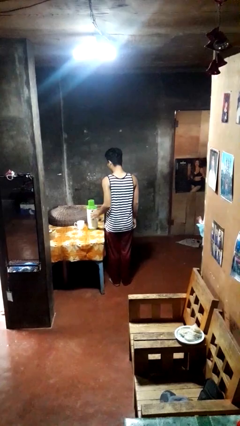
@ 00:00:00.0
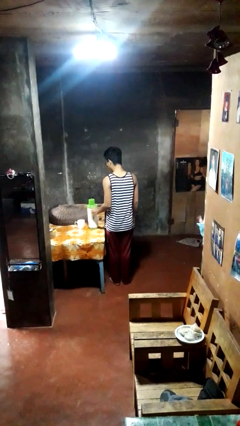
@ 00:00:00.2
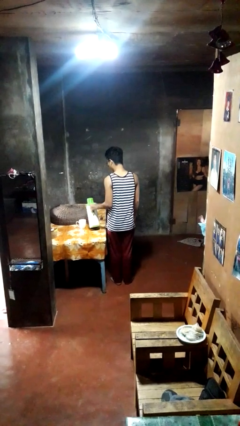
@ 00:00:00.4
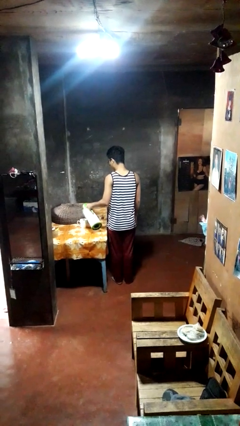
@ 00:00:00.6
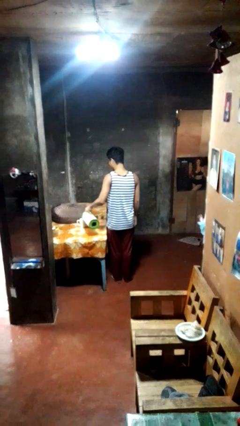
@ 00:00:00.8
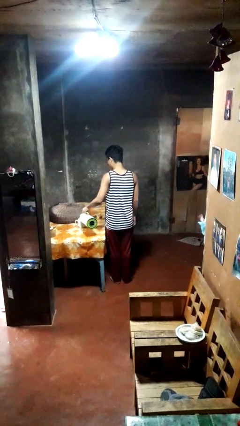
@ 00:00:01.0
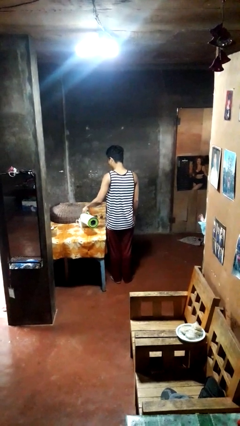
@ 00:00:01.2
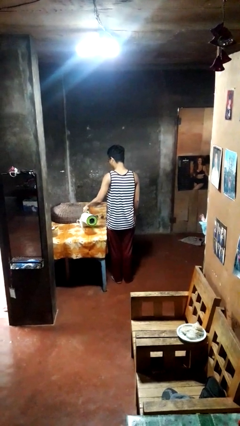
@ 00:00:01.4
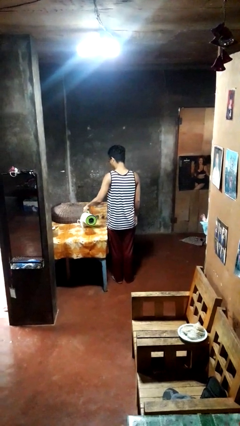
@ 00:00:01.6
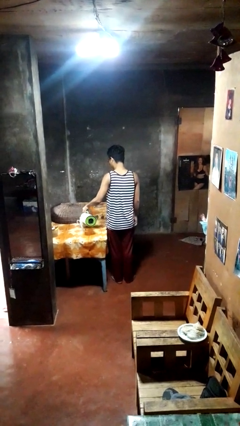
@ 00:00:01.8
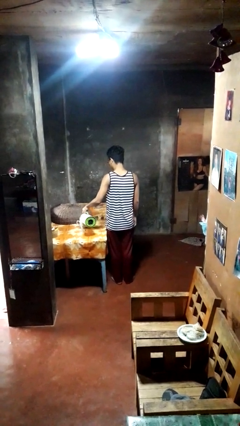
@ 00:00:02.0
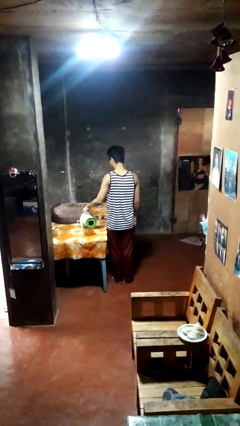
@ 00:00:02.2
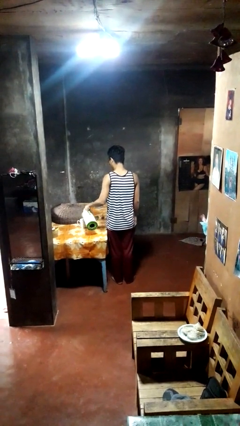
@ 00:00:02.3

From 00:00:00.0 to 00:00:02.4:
person pours coffee into mug

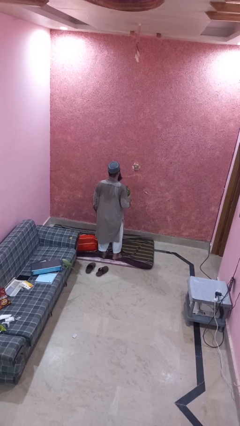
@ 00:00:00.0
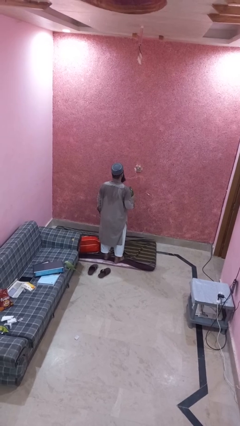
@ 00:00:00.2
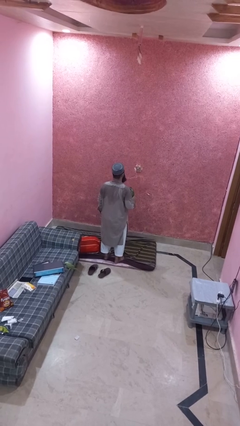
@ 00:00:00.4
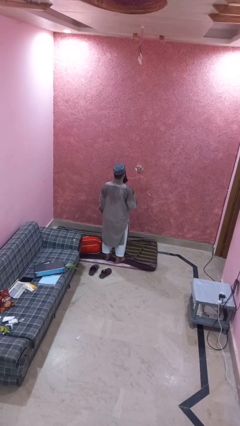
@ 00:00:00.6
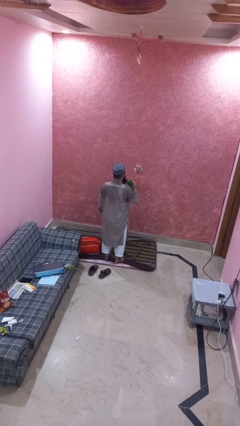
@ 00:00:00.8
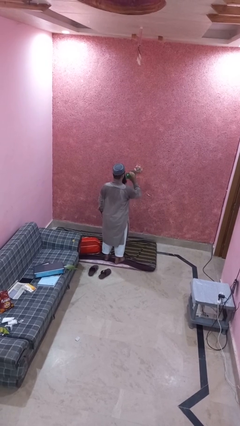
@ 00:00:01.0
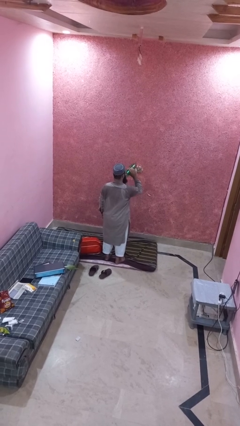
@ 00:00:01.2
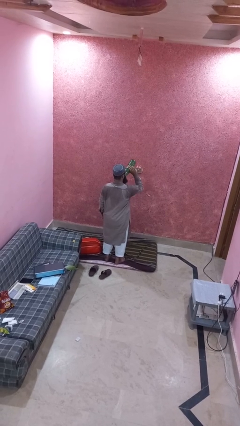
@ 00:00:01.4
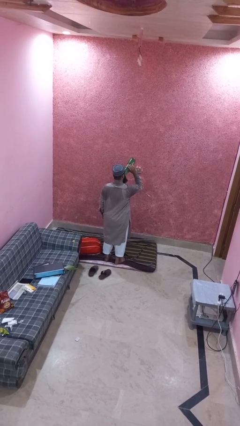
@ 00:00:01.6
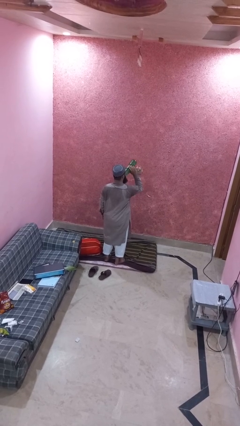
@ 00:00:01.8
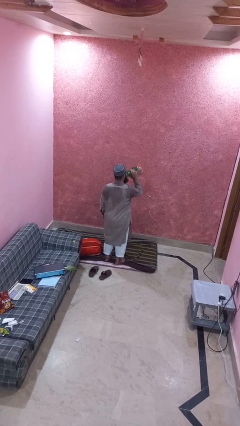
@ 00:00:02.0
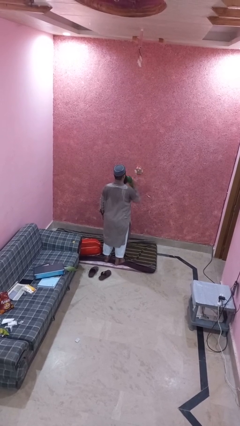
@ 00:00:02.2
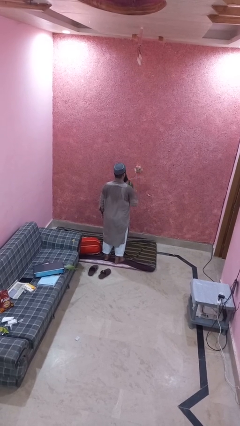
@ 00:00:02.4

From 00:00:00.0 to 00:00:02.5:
person drinks from bottle

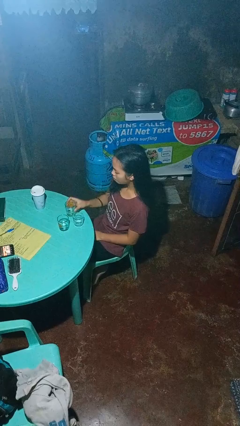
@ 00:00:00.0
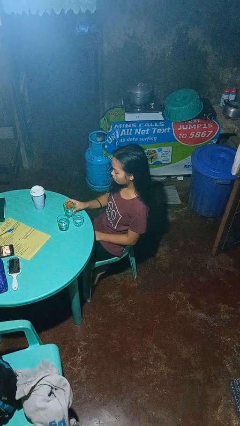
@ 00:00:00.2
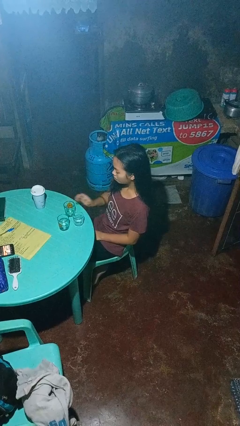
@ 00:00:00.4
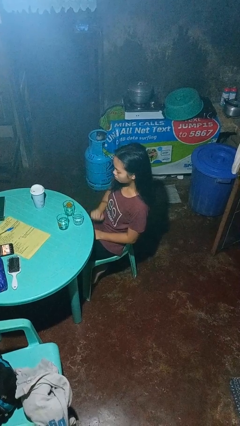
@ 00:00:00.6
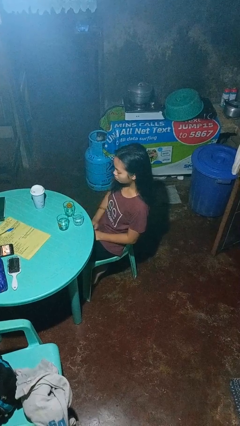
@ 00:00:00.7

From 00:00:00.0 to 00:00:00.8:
person puts down object on table

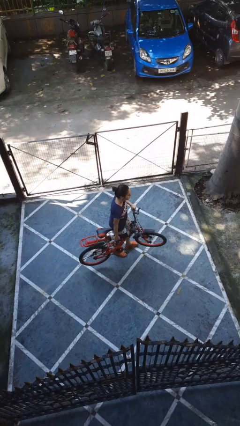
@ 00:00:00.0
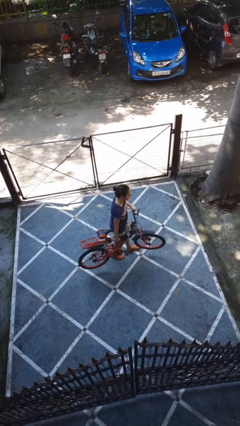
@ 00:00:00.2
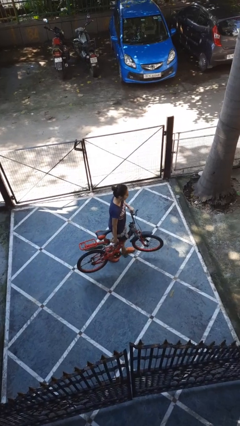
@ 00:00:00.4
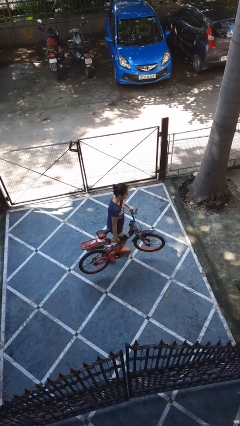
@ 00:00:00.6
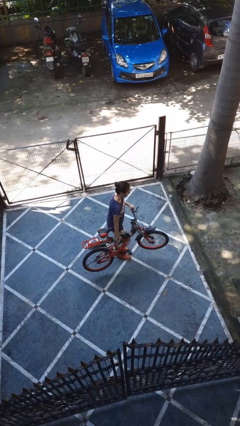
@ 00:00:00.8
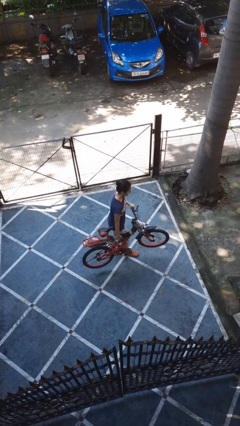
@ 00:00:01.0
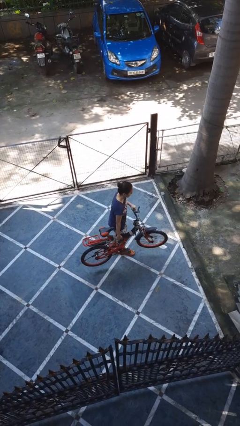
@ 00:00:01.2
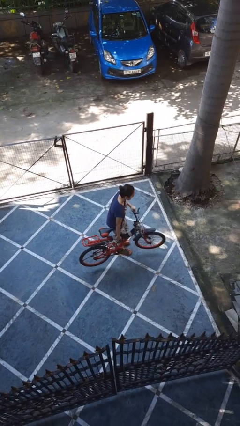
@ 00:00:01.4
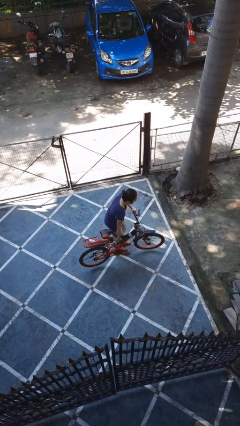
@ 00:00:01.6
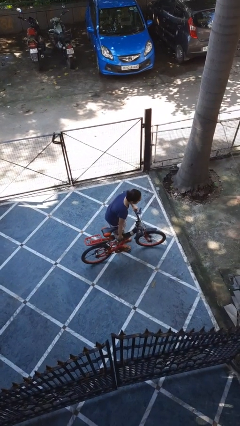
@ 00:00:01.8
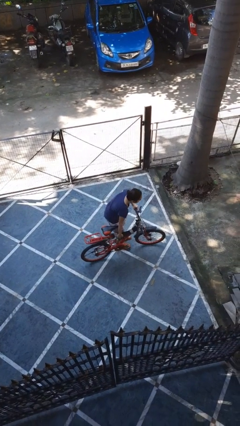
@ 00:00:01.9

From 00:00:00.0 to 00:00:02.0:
person carries bicycle

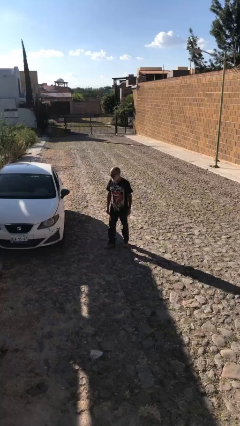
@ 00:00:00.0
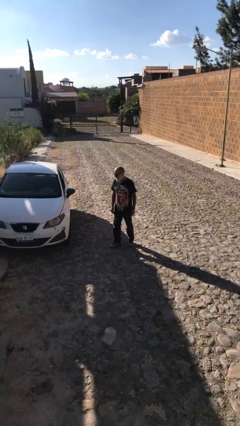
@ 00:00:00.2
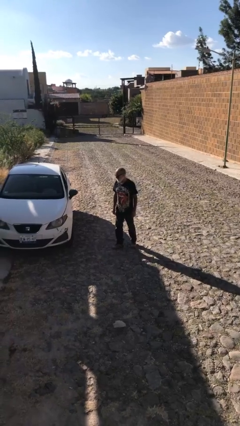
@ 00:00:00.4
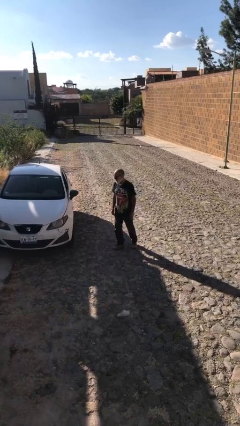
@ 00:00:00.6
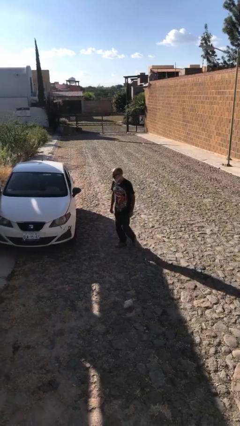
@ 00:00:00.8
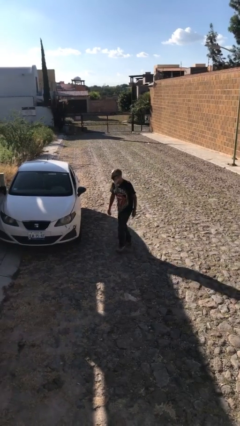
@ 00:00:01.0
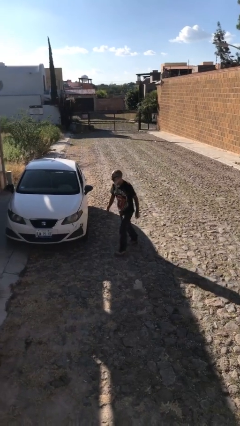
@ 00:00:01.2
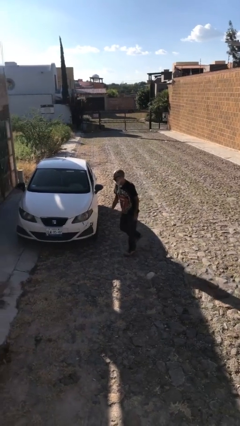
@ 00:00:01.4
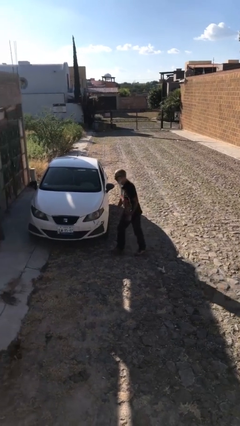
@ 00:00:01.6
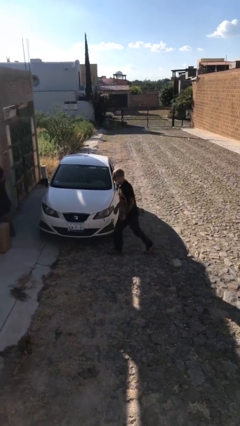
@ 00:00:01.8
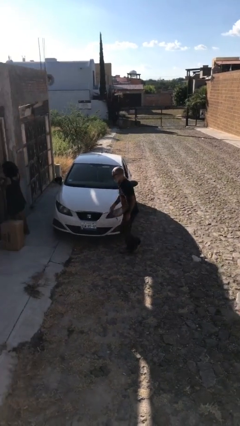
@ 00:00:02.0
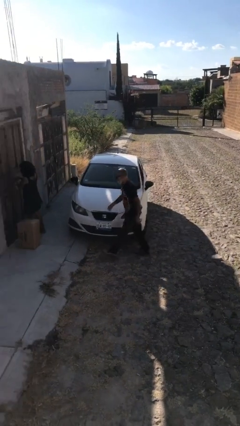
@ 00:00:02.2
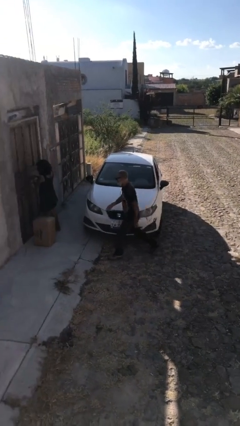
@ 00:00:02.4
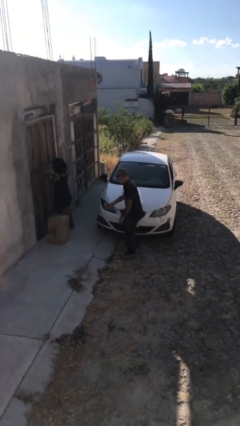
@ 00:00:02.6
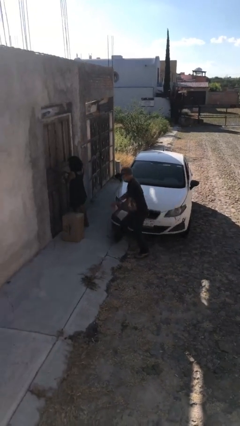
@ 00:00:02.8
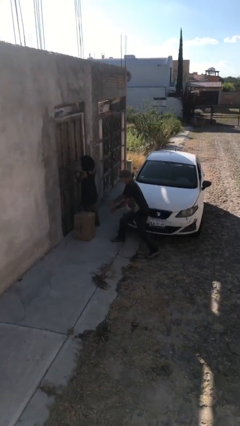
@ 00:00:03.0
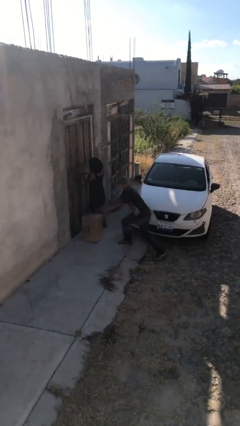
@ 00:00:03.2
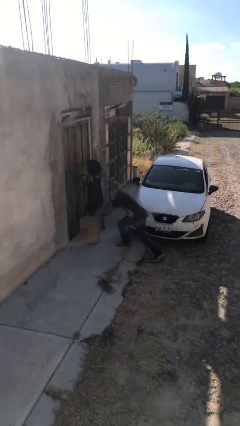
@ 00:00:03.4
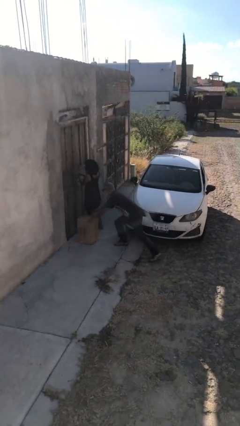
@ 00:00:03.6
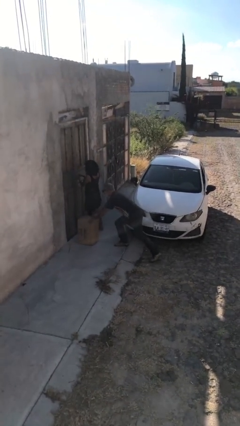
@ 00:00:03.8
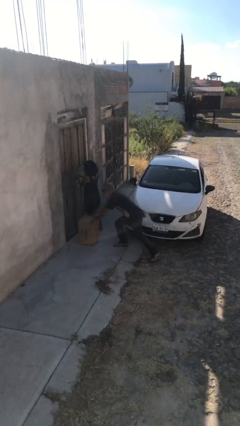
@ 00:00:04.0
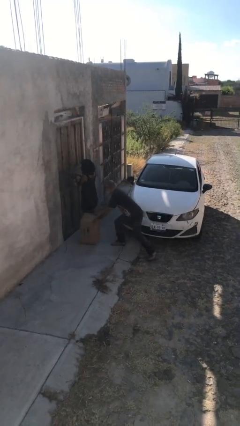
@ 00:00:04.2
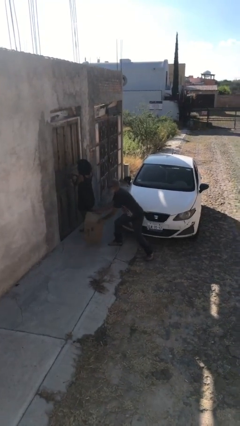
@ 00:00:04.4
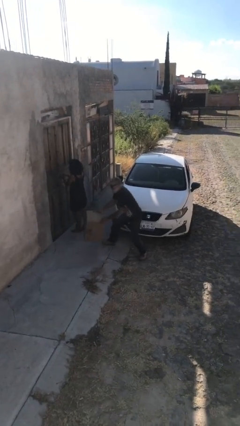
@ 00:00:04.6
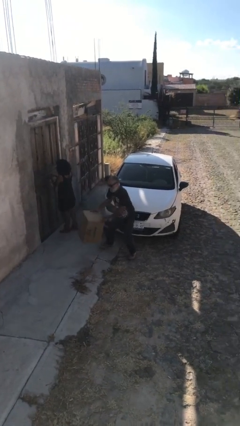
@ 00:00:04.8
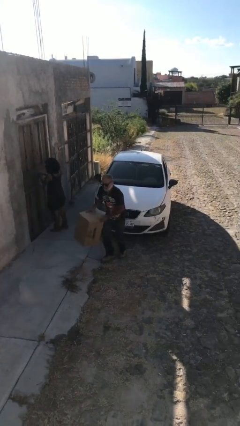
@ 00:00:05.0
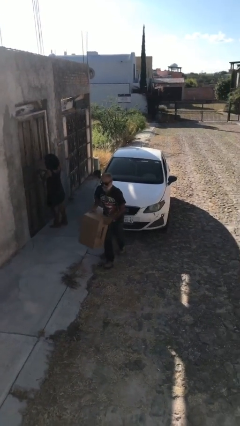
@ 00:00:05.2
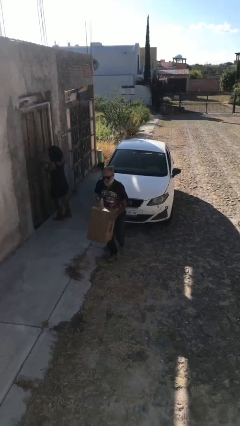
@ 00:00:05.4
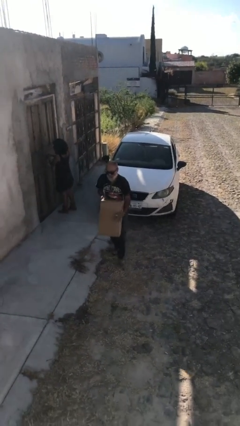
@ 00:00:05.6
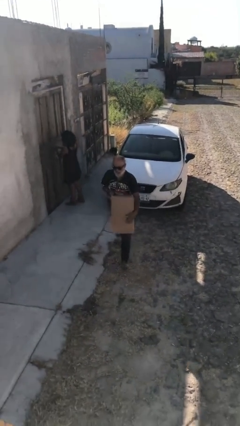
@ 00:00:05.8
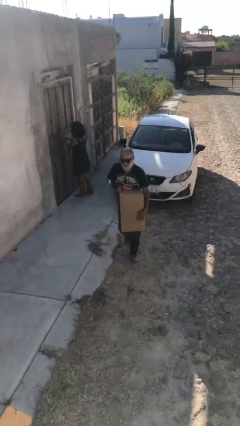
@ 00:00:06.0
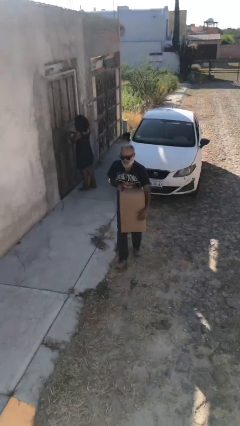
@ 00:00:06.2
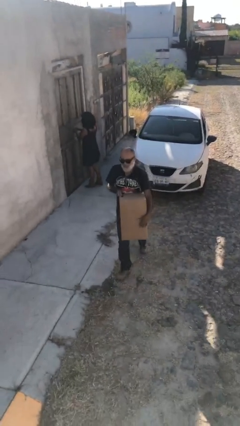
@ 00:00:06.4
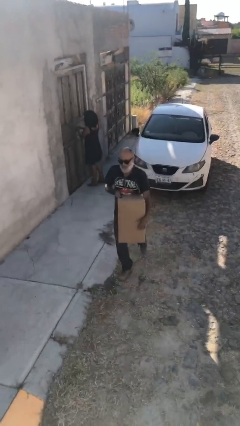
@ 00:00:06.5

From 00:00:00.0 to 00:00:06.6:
person steals object from person

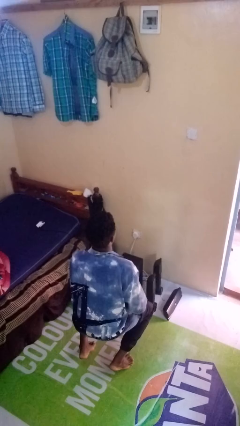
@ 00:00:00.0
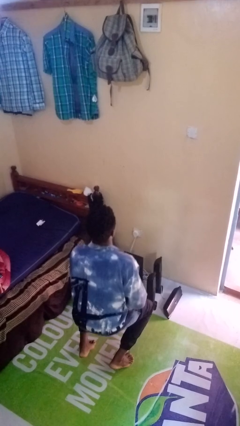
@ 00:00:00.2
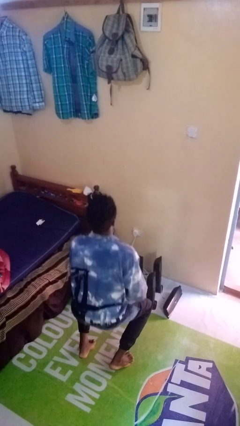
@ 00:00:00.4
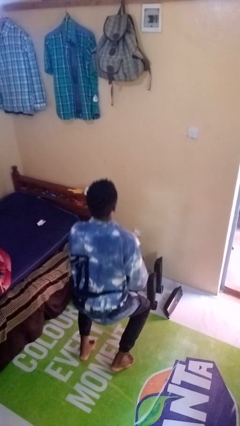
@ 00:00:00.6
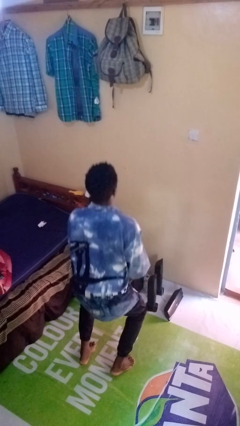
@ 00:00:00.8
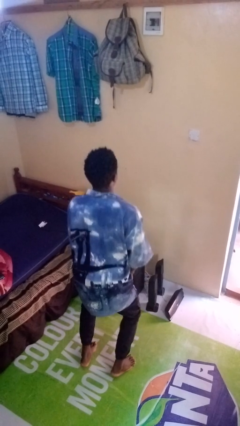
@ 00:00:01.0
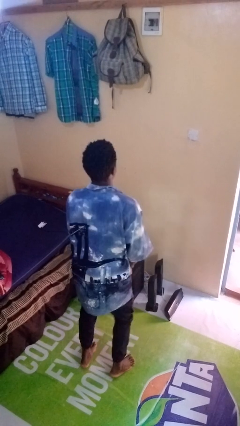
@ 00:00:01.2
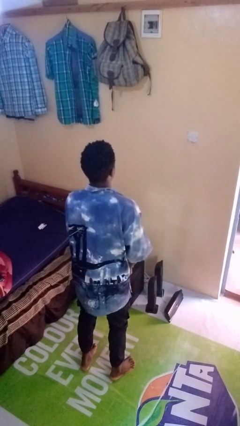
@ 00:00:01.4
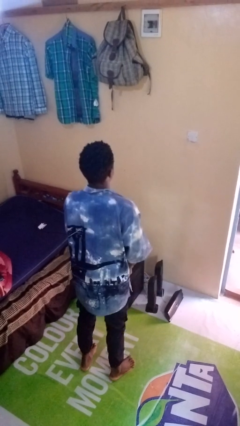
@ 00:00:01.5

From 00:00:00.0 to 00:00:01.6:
person stands up

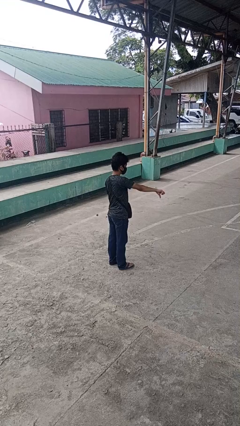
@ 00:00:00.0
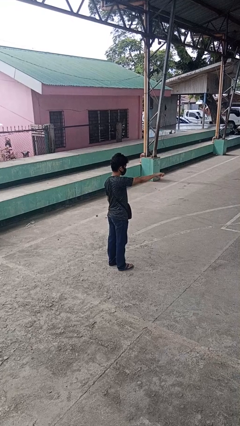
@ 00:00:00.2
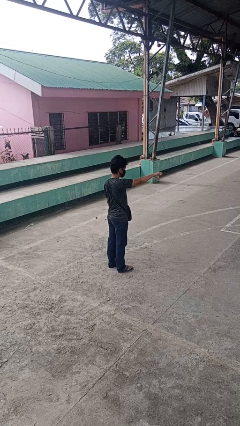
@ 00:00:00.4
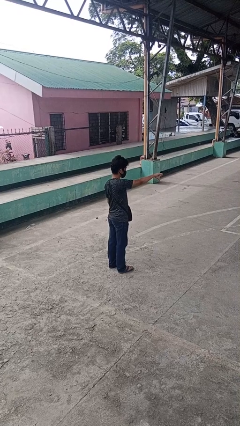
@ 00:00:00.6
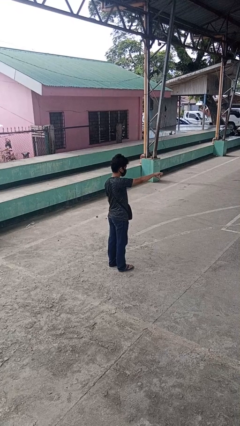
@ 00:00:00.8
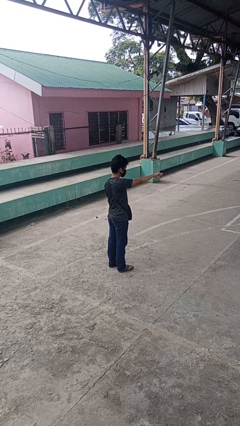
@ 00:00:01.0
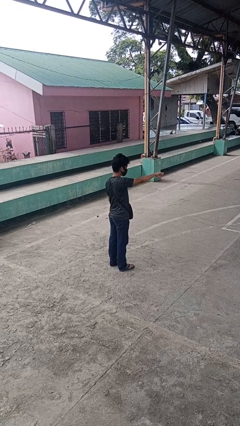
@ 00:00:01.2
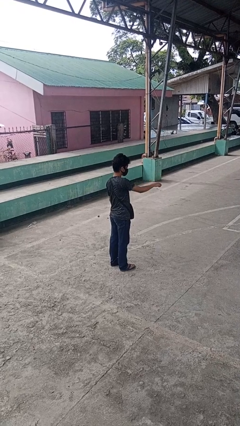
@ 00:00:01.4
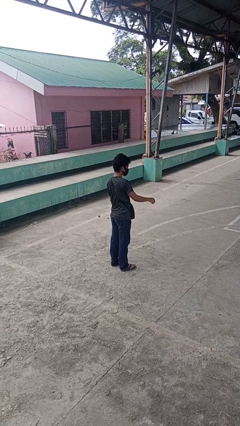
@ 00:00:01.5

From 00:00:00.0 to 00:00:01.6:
person gestures thumbs down
